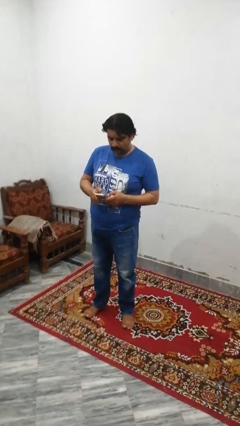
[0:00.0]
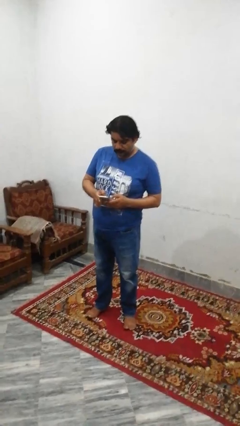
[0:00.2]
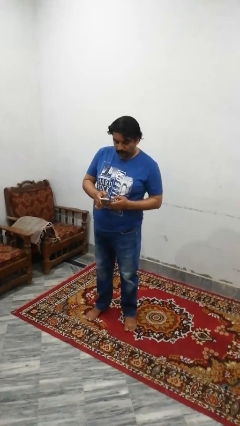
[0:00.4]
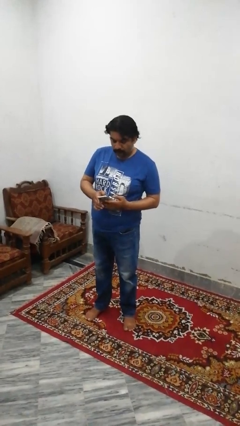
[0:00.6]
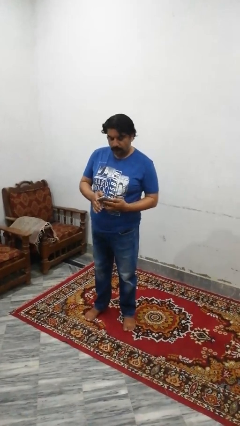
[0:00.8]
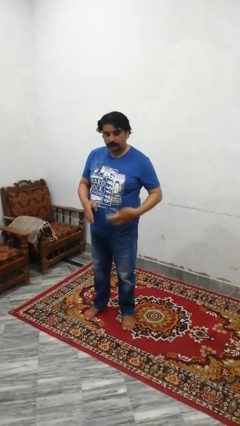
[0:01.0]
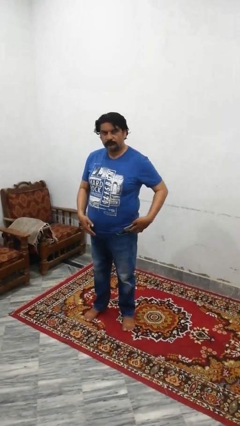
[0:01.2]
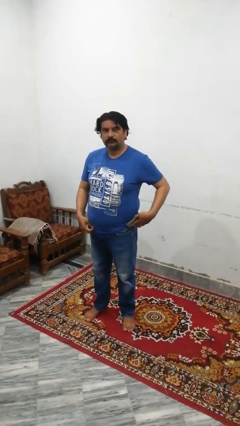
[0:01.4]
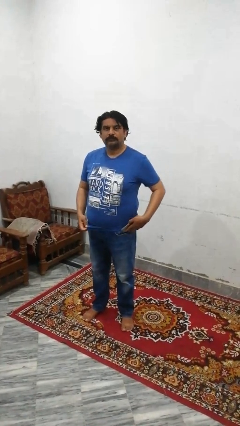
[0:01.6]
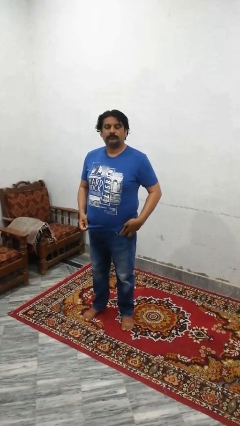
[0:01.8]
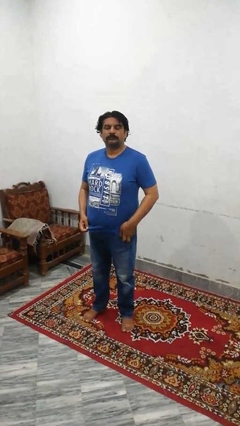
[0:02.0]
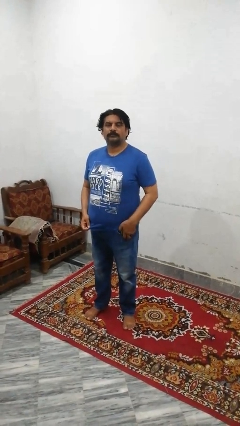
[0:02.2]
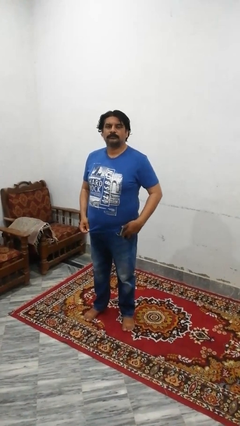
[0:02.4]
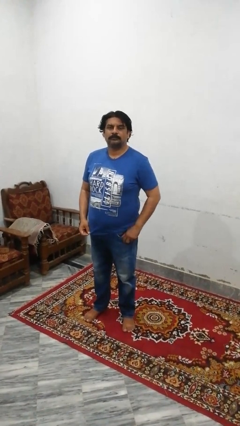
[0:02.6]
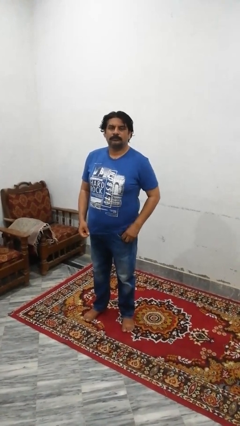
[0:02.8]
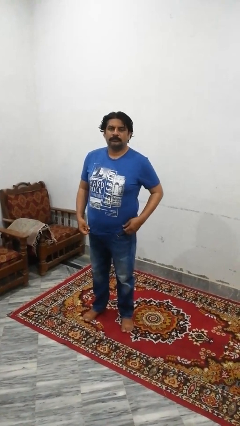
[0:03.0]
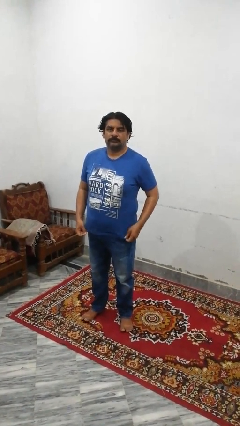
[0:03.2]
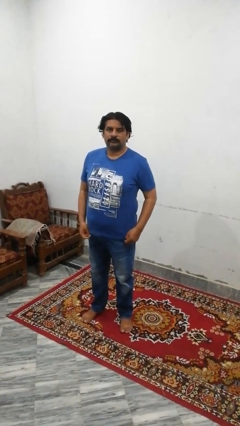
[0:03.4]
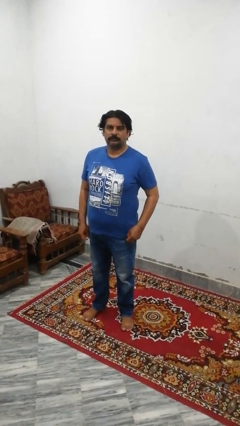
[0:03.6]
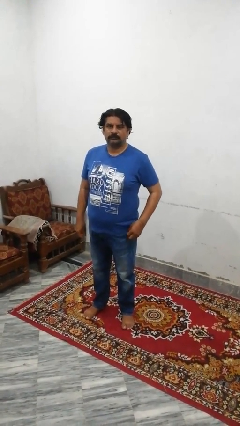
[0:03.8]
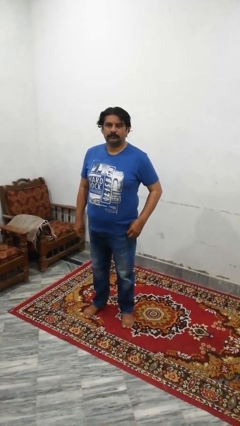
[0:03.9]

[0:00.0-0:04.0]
person puts phone into pocket

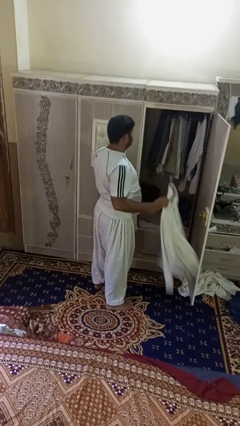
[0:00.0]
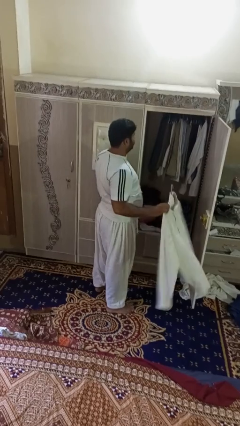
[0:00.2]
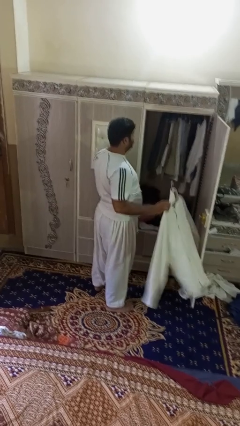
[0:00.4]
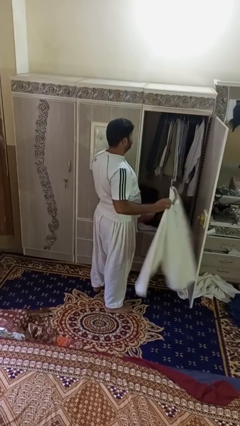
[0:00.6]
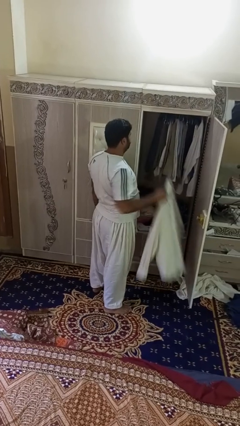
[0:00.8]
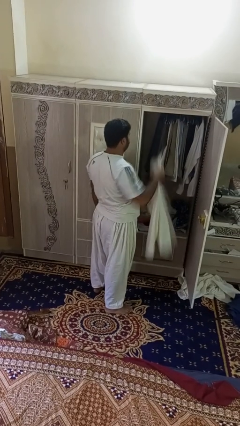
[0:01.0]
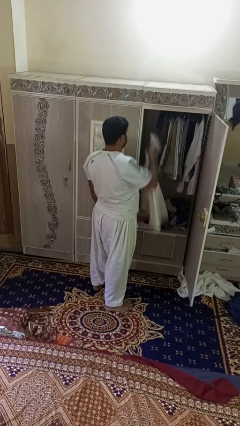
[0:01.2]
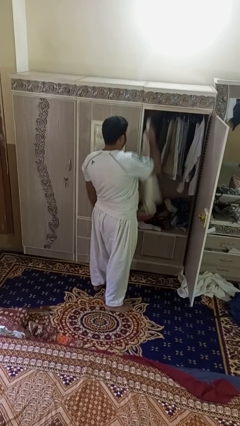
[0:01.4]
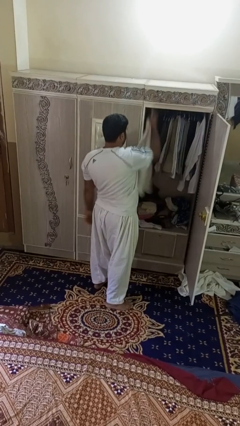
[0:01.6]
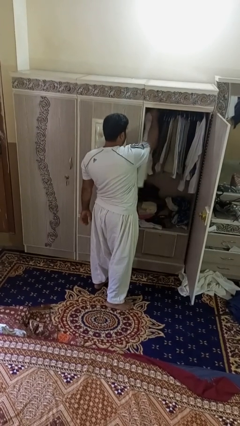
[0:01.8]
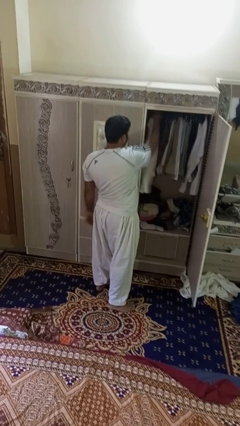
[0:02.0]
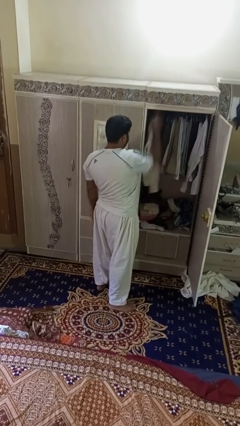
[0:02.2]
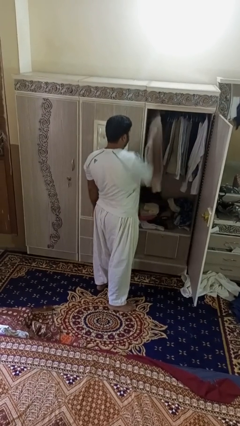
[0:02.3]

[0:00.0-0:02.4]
person puts clothes into closet

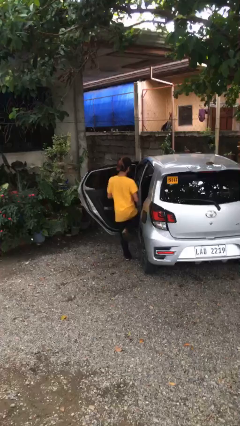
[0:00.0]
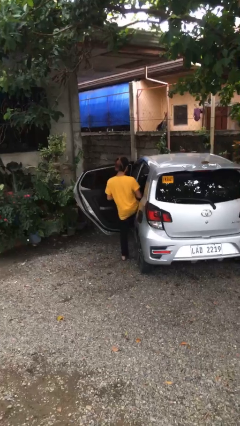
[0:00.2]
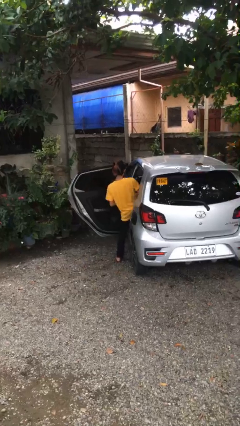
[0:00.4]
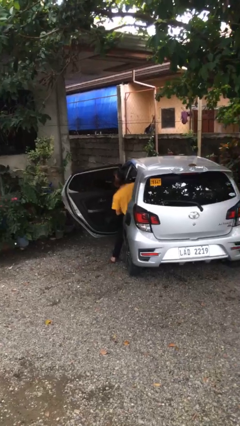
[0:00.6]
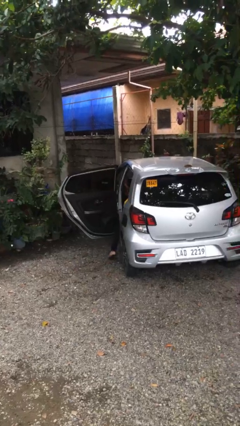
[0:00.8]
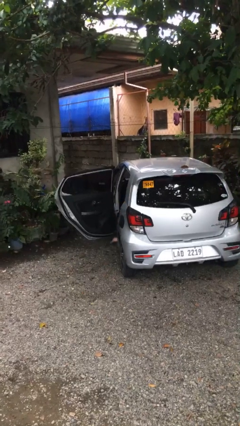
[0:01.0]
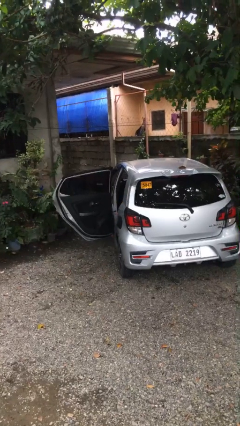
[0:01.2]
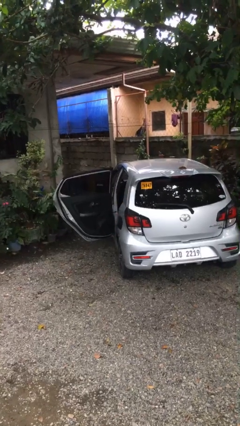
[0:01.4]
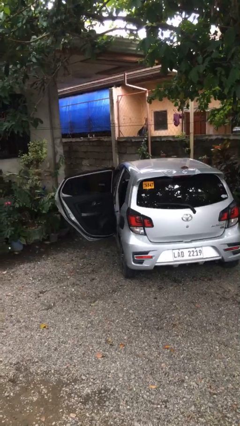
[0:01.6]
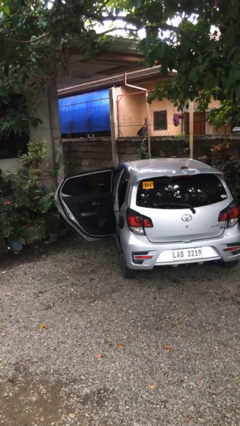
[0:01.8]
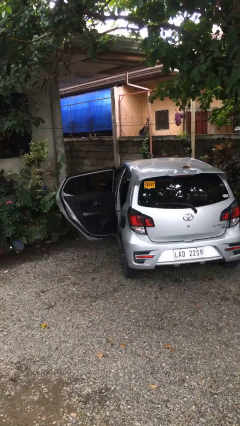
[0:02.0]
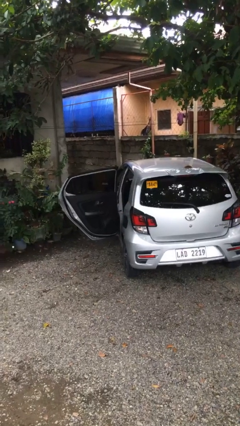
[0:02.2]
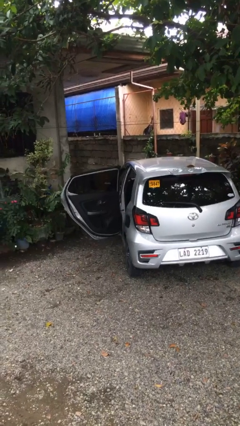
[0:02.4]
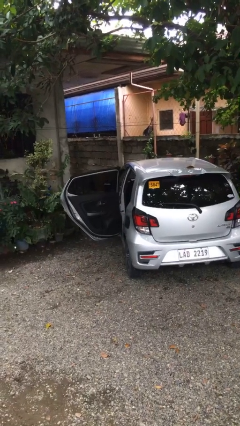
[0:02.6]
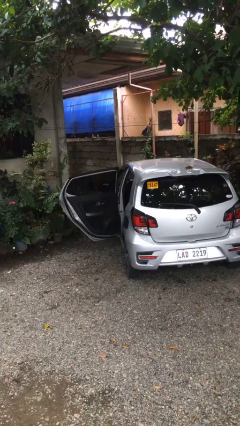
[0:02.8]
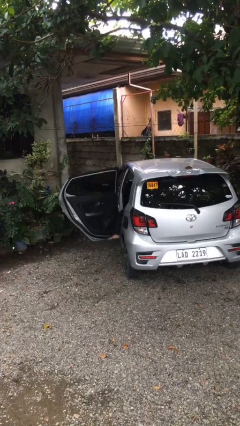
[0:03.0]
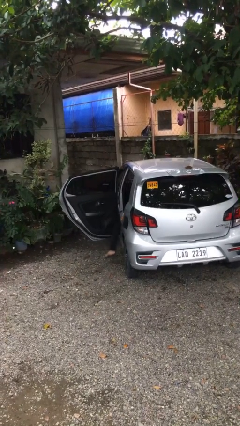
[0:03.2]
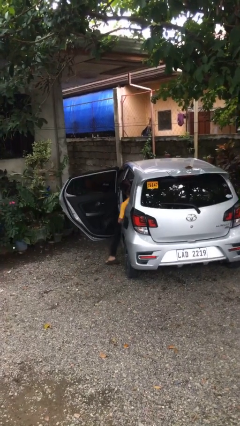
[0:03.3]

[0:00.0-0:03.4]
person enters car

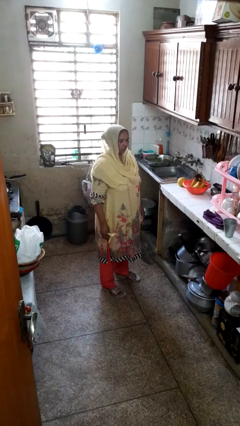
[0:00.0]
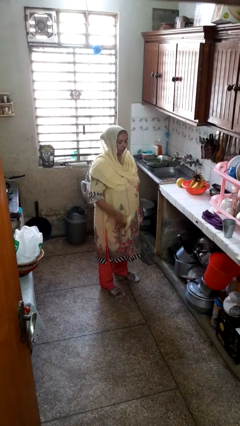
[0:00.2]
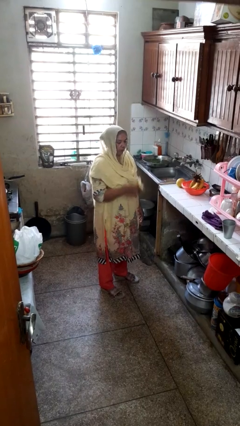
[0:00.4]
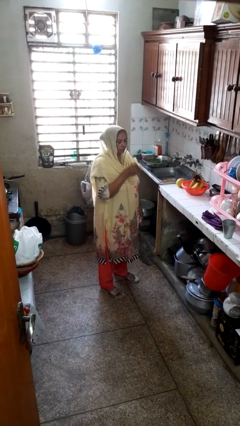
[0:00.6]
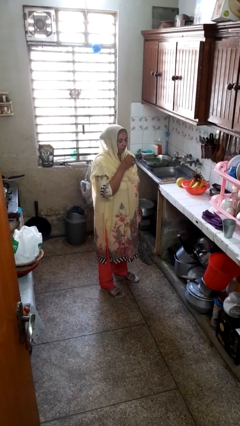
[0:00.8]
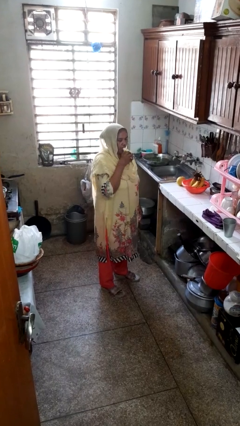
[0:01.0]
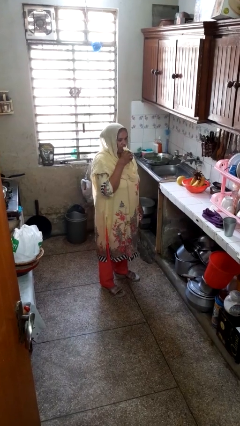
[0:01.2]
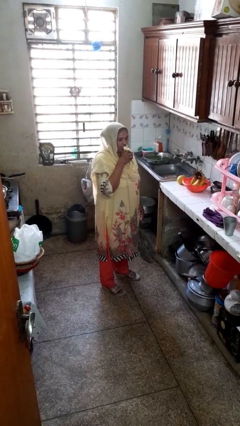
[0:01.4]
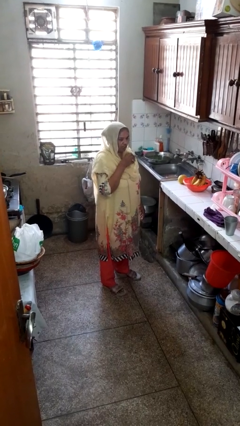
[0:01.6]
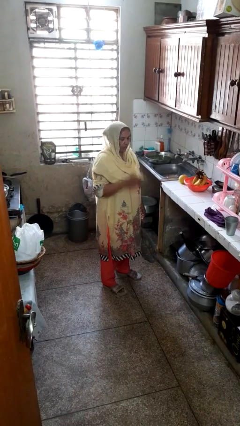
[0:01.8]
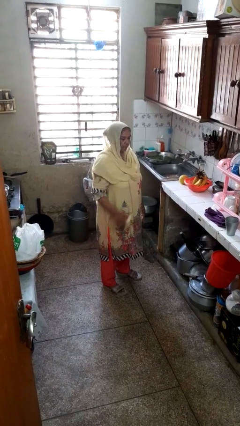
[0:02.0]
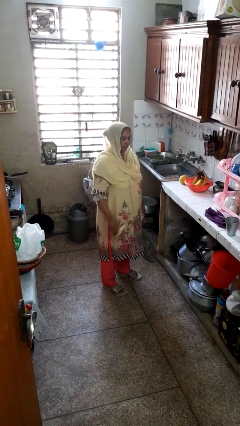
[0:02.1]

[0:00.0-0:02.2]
person eats banana

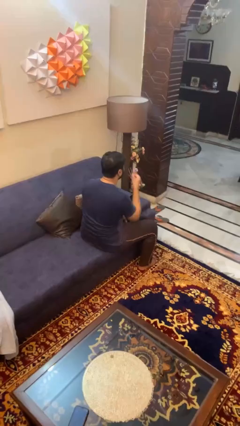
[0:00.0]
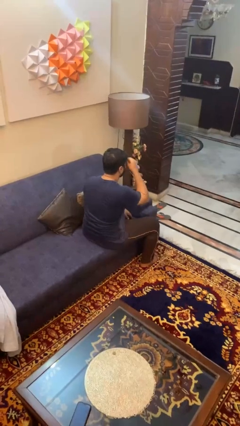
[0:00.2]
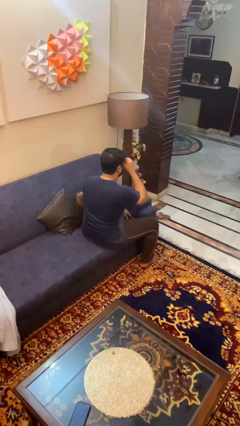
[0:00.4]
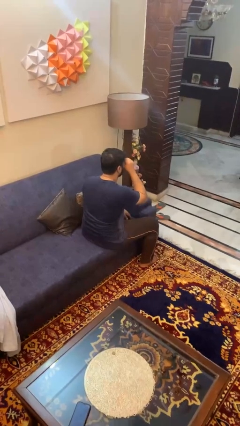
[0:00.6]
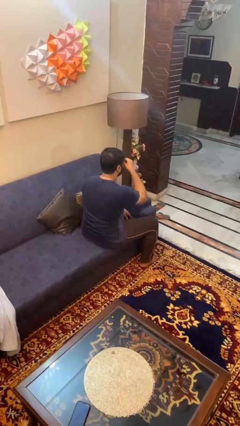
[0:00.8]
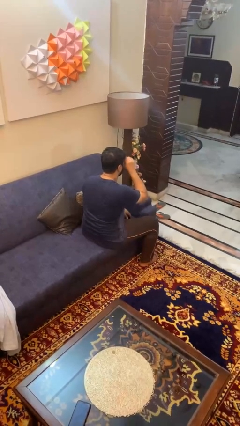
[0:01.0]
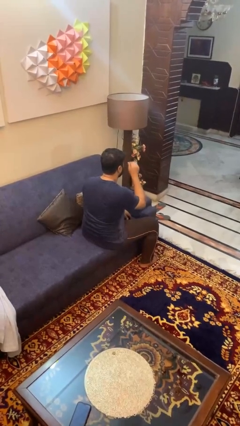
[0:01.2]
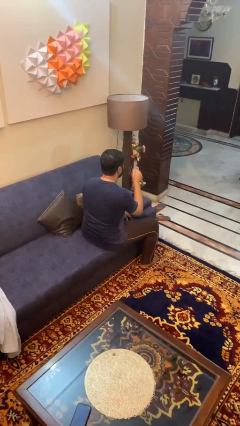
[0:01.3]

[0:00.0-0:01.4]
person rubs eyes

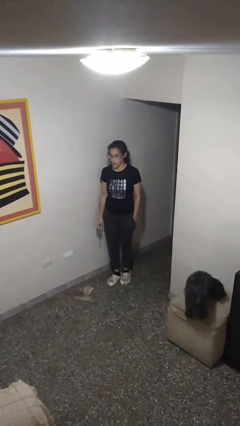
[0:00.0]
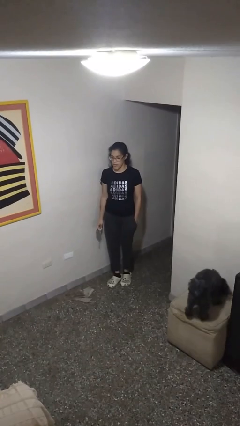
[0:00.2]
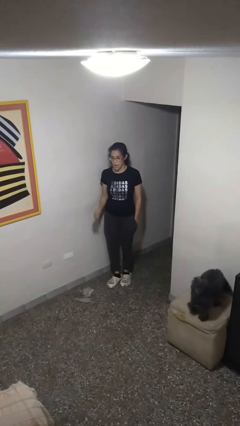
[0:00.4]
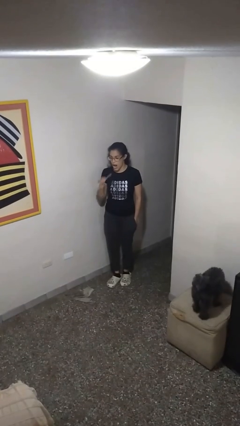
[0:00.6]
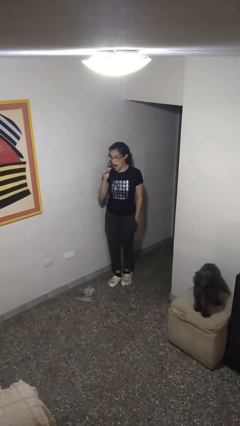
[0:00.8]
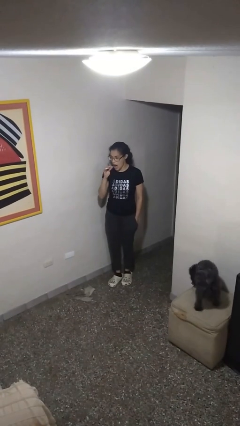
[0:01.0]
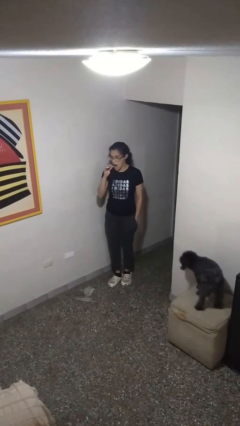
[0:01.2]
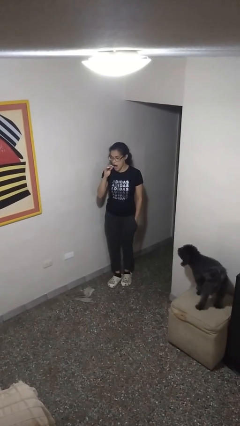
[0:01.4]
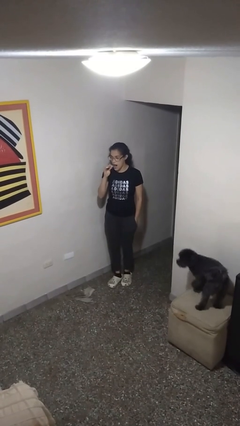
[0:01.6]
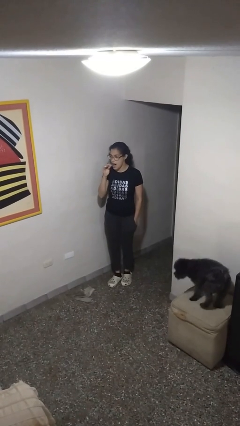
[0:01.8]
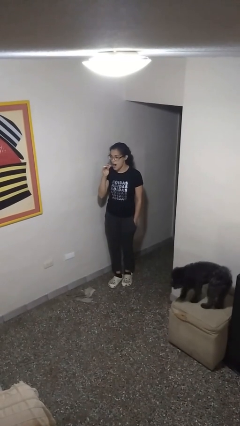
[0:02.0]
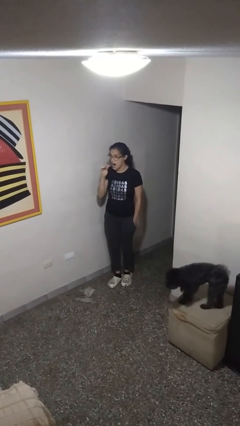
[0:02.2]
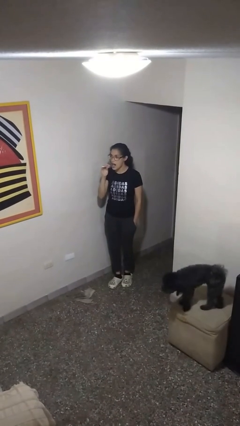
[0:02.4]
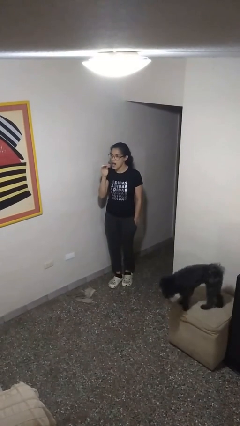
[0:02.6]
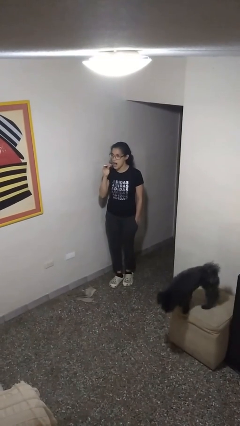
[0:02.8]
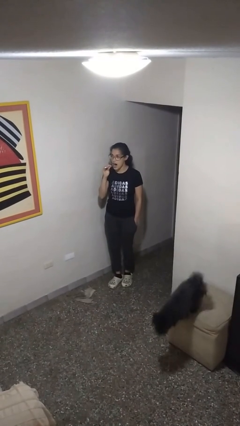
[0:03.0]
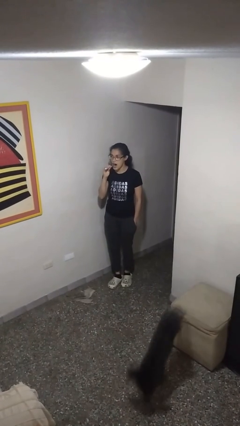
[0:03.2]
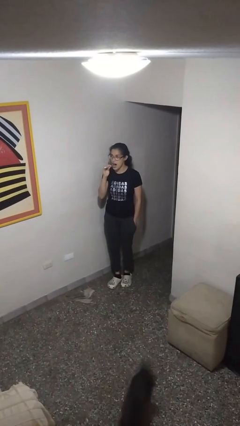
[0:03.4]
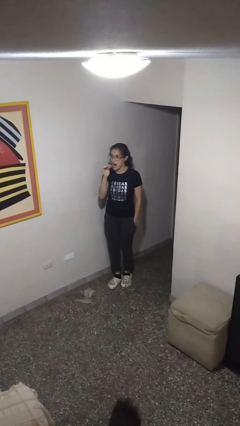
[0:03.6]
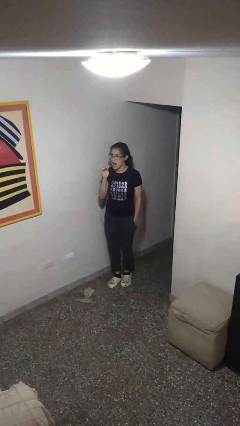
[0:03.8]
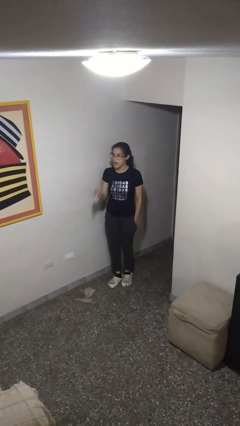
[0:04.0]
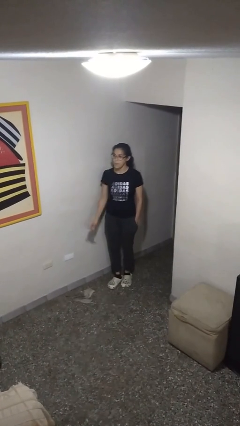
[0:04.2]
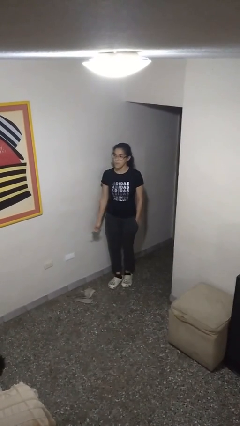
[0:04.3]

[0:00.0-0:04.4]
person brushes teeth
